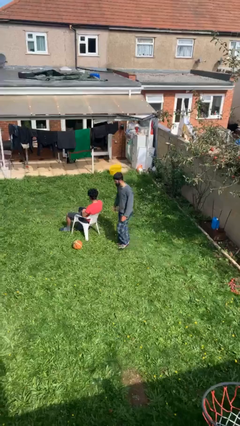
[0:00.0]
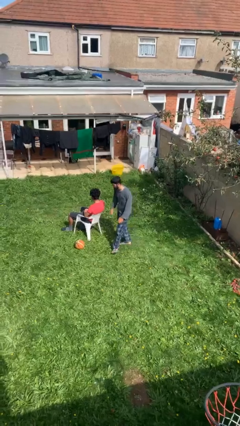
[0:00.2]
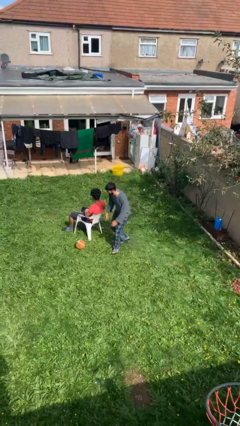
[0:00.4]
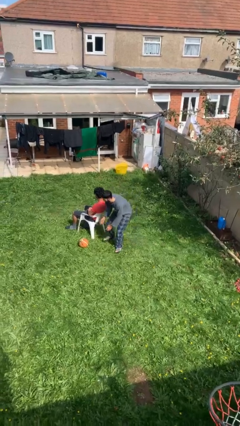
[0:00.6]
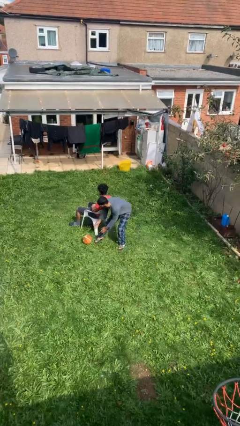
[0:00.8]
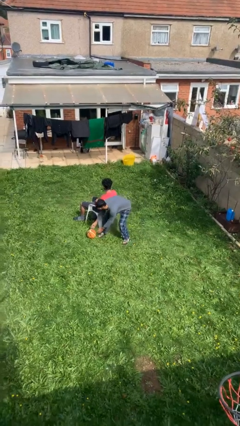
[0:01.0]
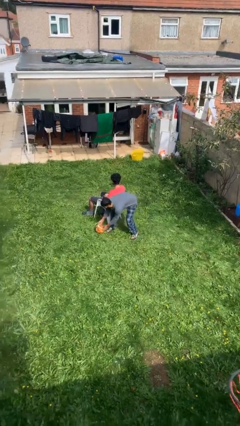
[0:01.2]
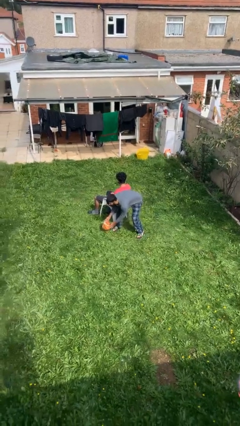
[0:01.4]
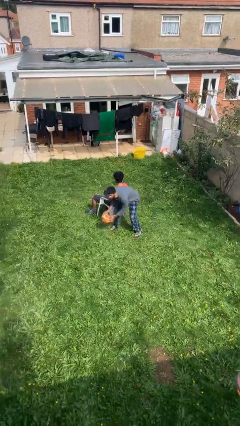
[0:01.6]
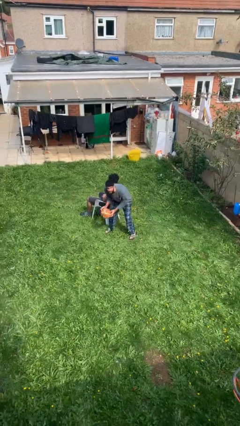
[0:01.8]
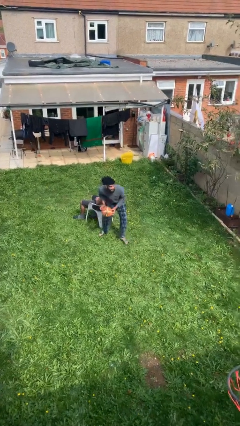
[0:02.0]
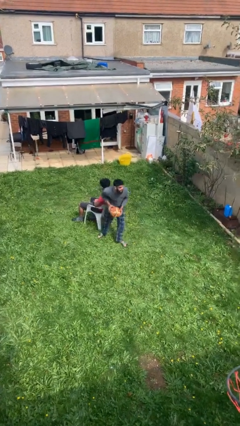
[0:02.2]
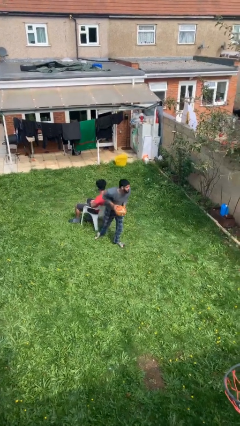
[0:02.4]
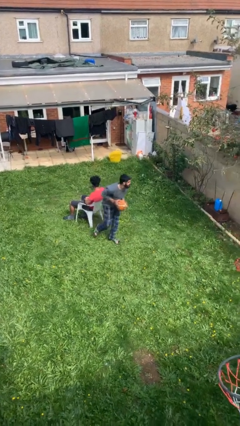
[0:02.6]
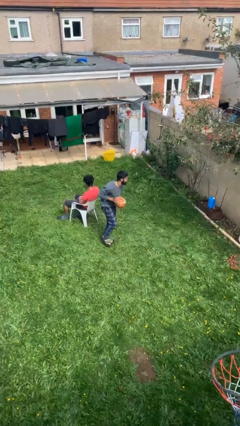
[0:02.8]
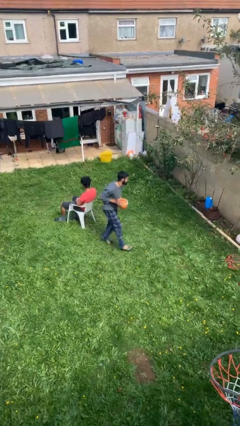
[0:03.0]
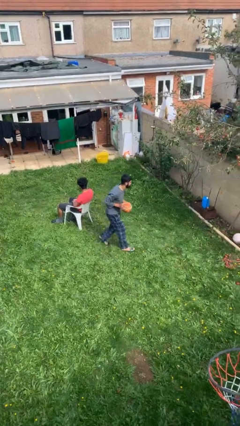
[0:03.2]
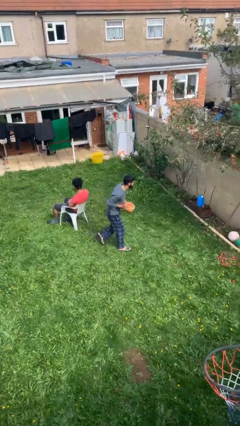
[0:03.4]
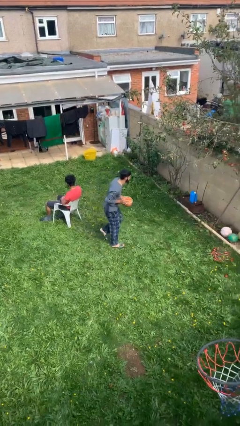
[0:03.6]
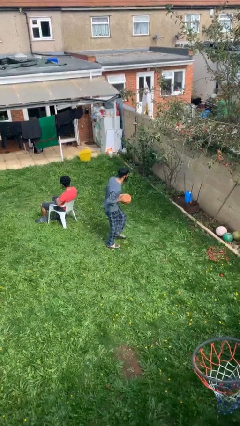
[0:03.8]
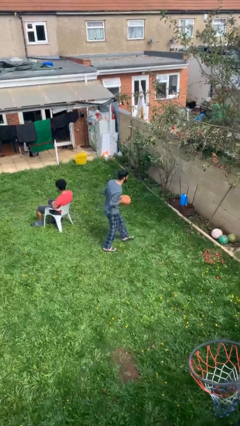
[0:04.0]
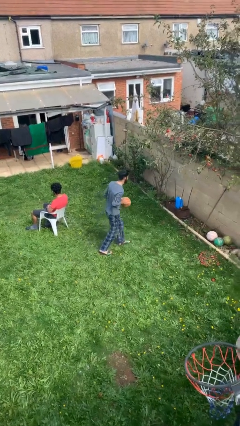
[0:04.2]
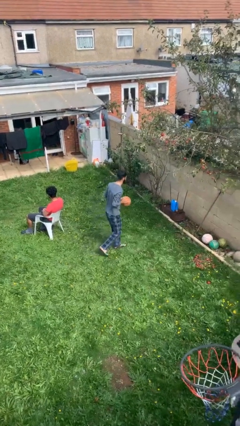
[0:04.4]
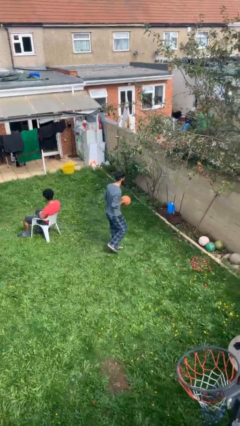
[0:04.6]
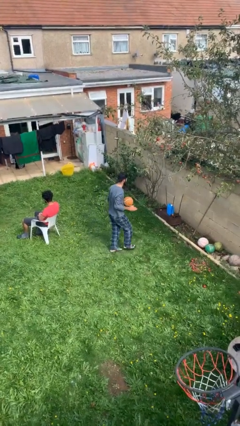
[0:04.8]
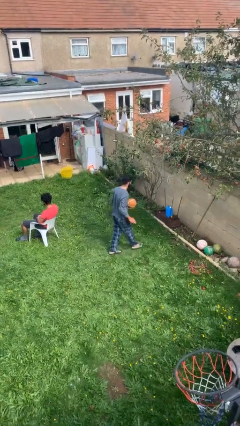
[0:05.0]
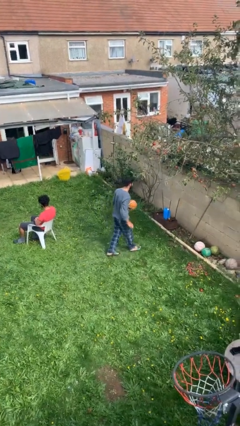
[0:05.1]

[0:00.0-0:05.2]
person steals object from person

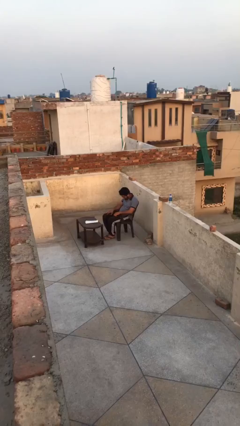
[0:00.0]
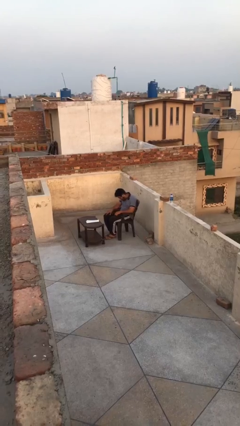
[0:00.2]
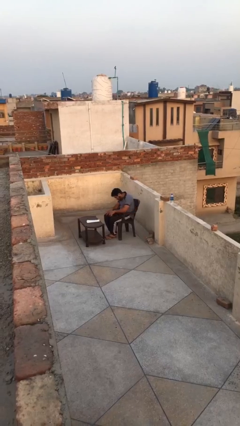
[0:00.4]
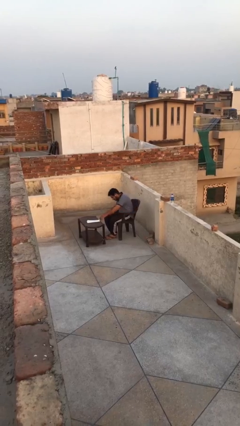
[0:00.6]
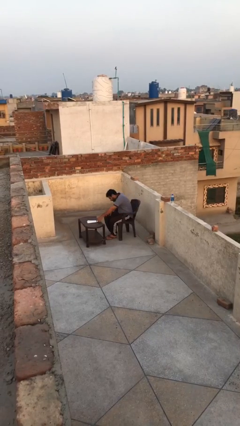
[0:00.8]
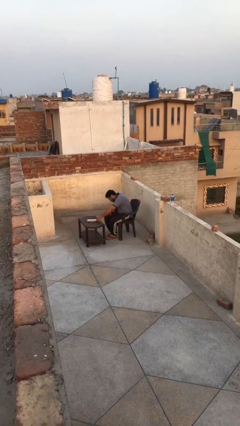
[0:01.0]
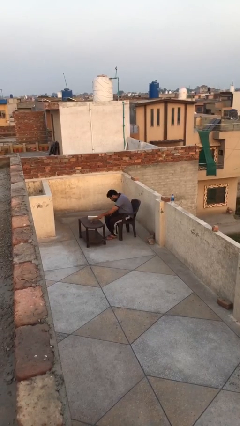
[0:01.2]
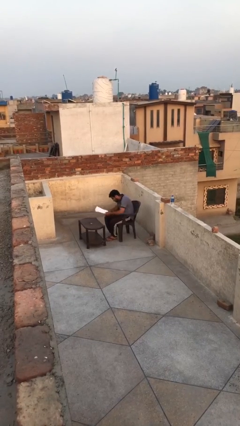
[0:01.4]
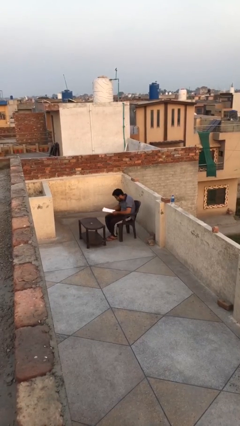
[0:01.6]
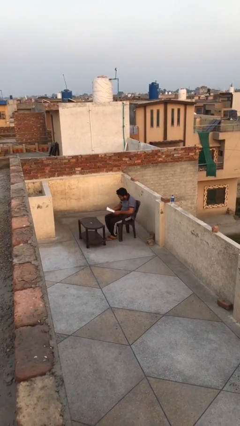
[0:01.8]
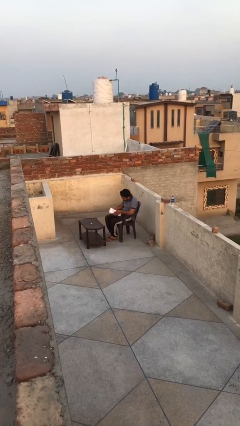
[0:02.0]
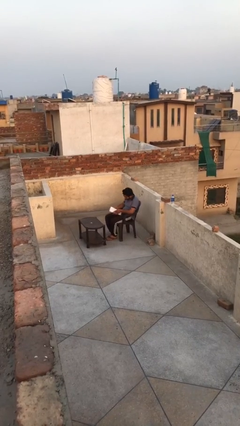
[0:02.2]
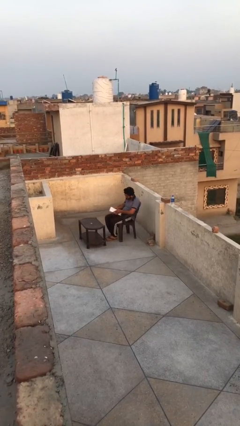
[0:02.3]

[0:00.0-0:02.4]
person picks up object from table

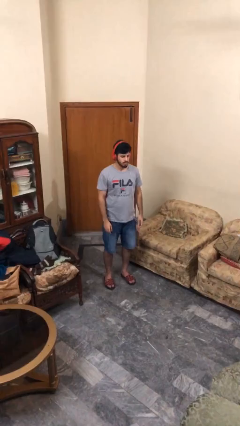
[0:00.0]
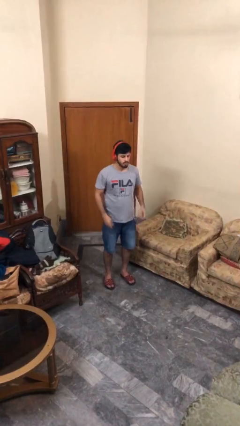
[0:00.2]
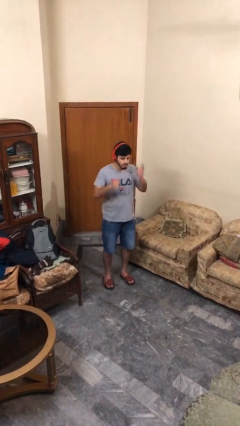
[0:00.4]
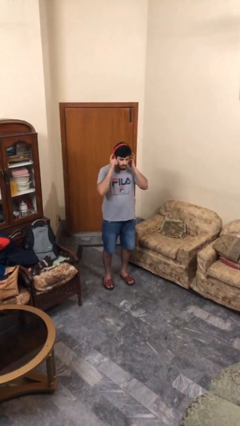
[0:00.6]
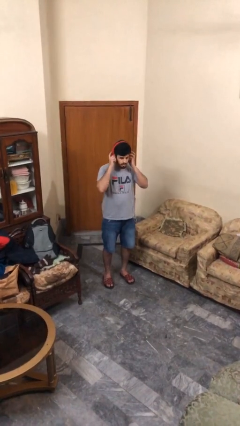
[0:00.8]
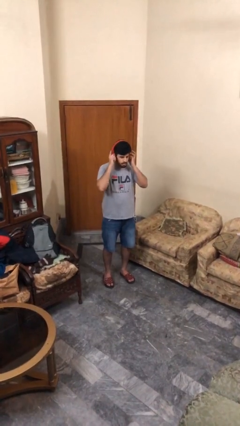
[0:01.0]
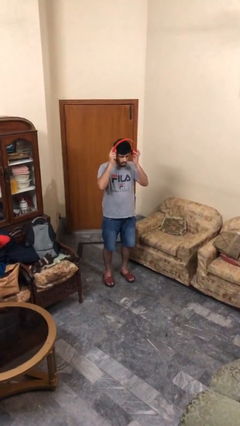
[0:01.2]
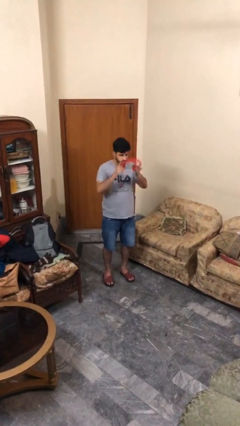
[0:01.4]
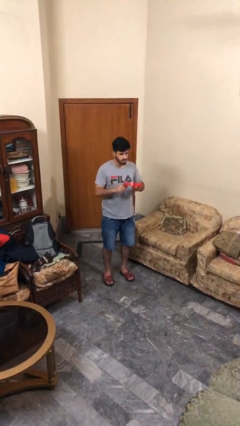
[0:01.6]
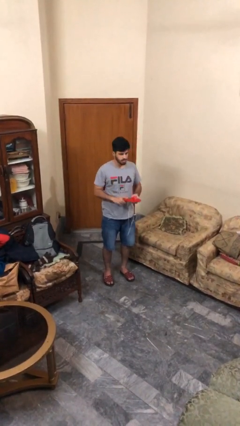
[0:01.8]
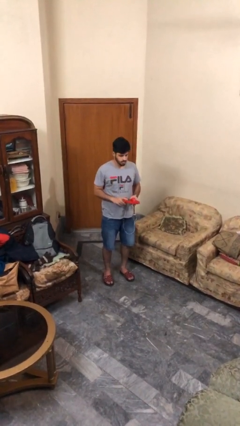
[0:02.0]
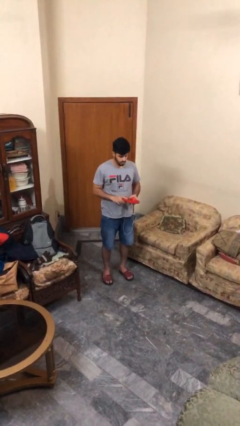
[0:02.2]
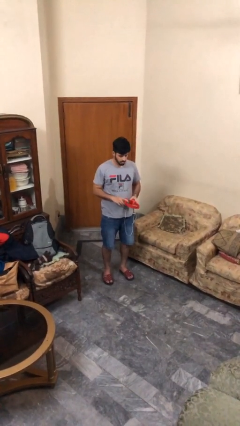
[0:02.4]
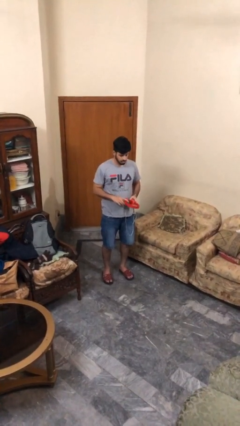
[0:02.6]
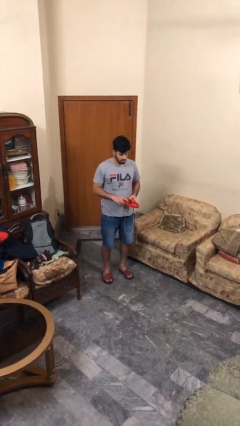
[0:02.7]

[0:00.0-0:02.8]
person takes off headphones

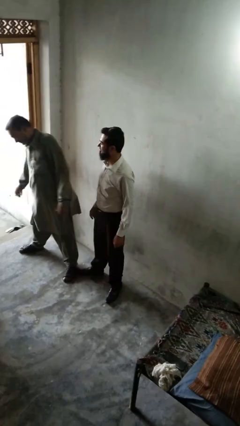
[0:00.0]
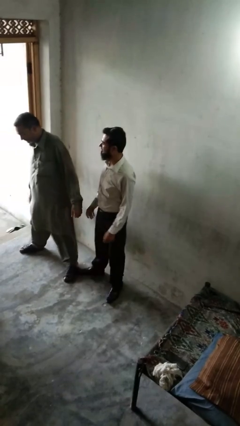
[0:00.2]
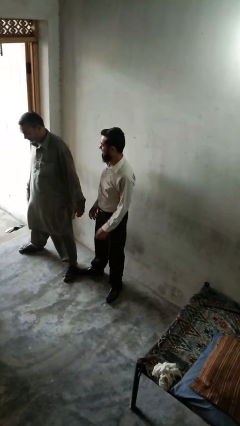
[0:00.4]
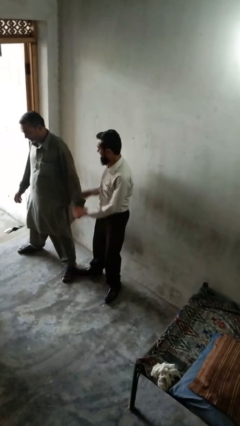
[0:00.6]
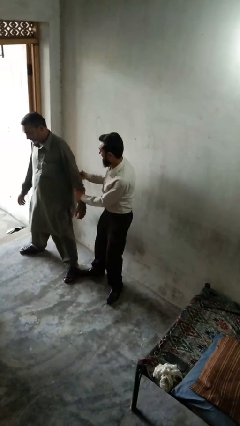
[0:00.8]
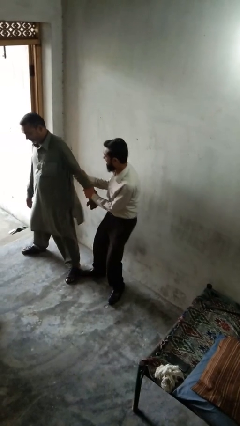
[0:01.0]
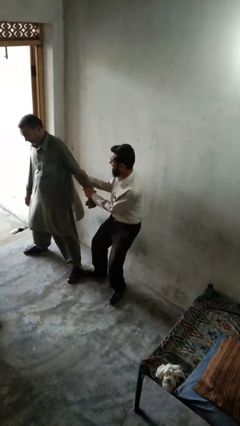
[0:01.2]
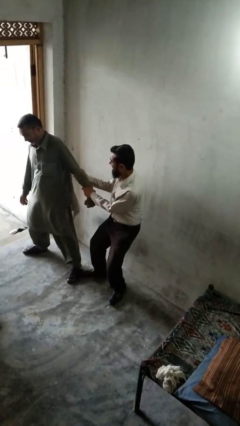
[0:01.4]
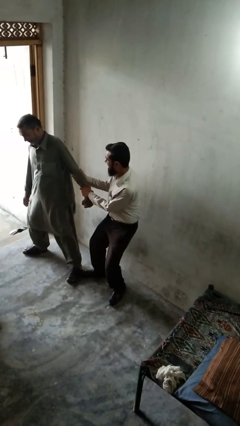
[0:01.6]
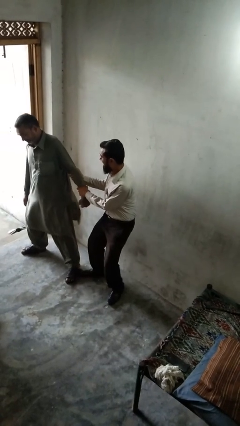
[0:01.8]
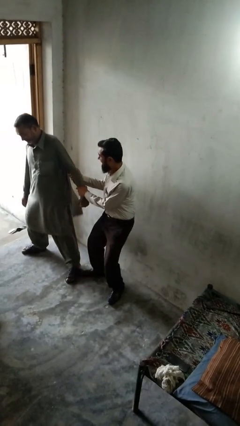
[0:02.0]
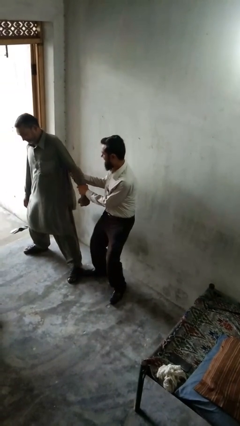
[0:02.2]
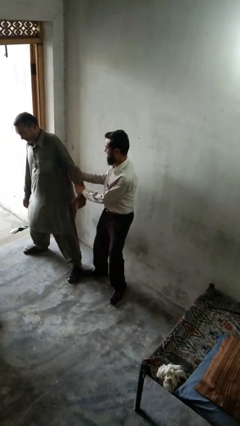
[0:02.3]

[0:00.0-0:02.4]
person grabs person by forearm

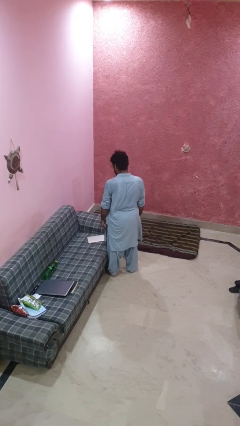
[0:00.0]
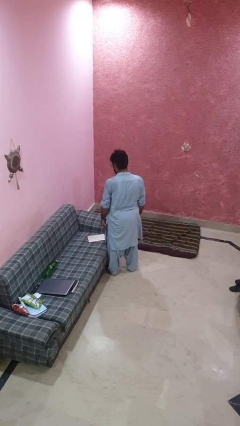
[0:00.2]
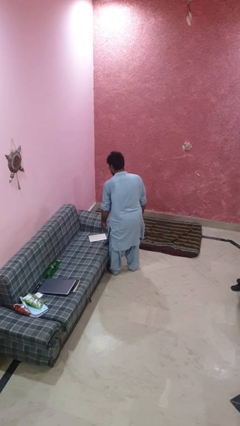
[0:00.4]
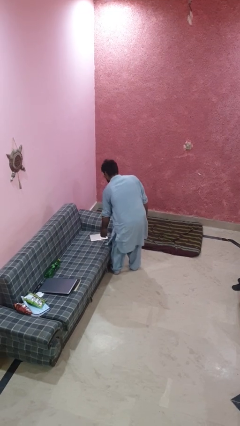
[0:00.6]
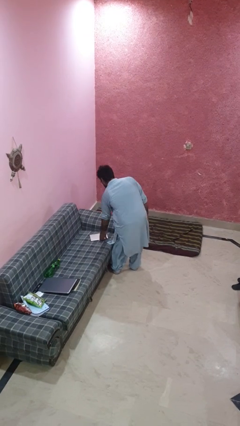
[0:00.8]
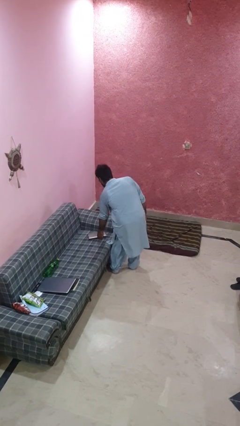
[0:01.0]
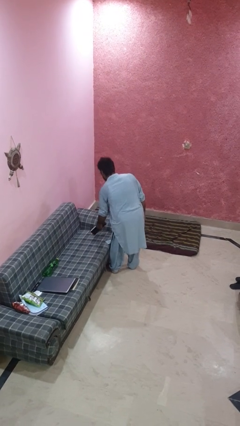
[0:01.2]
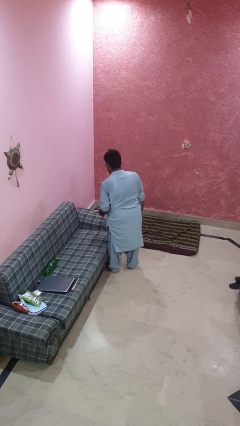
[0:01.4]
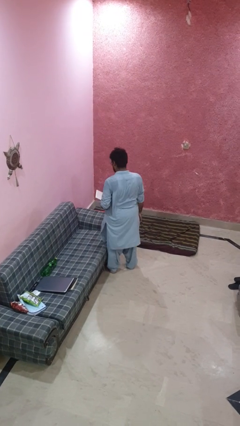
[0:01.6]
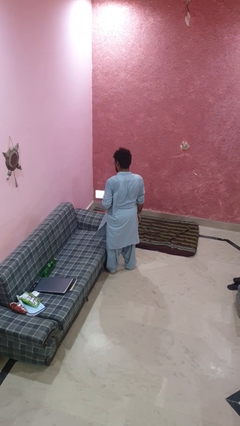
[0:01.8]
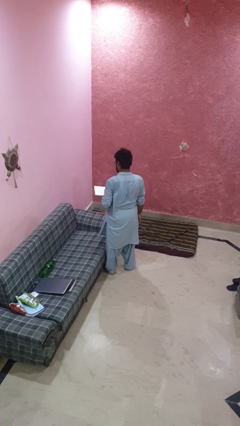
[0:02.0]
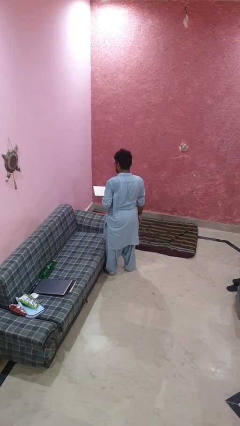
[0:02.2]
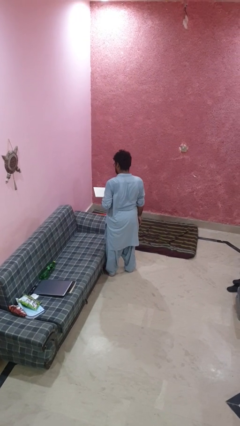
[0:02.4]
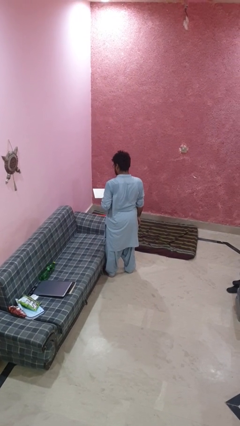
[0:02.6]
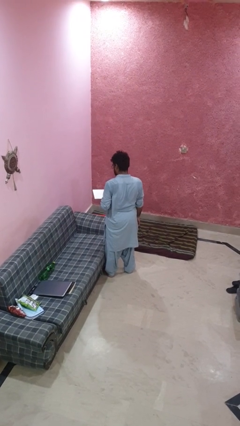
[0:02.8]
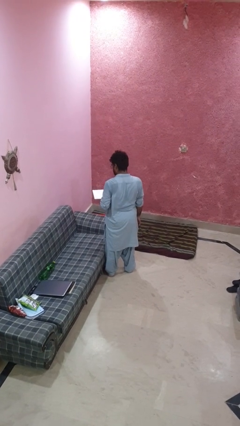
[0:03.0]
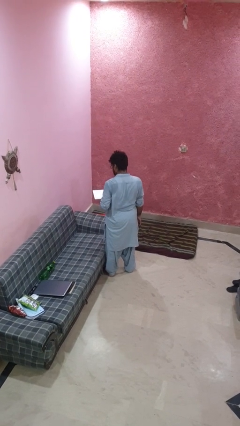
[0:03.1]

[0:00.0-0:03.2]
person picks up object from couch

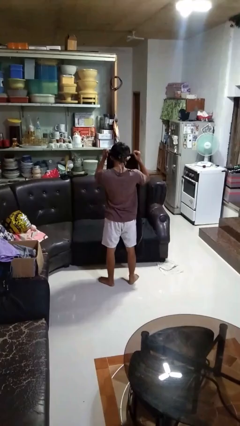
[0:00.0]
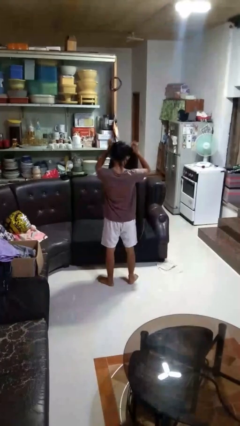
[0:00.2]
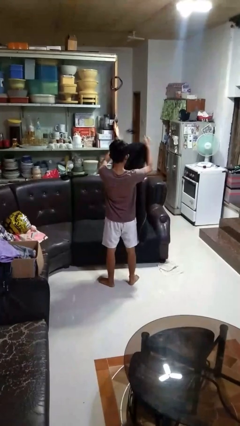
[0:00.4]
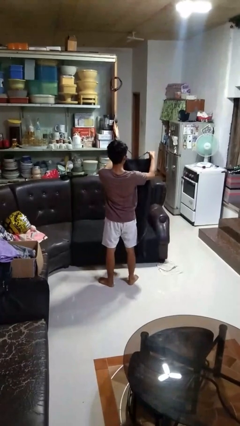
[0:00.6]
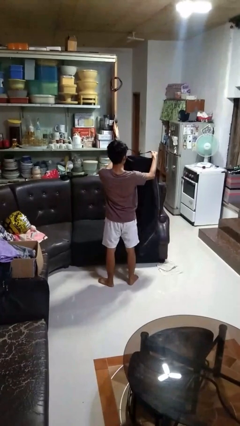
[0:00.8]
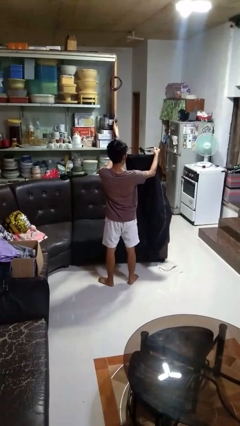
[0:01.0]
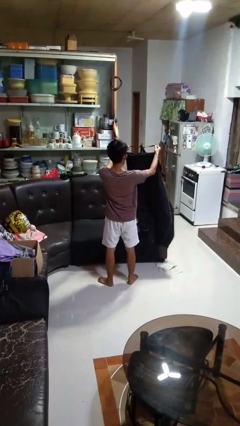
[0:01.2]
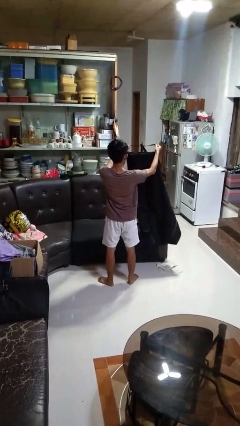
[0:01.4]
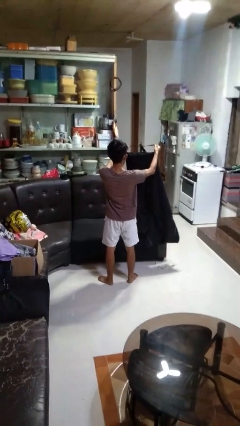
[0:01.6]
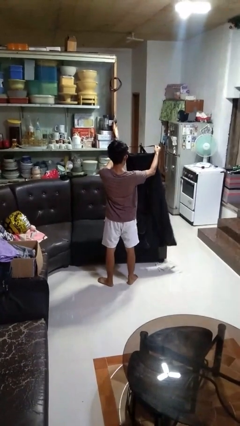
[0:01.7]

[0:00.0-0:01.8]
person takes off apron
